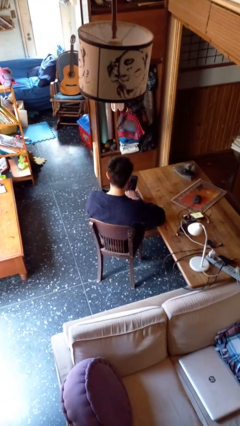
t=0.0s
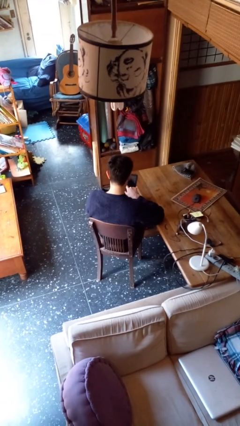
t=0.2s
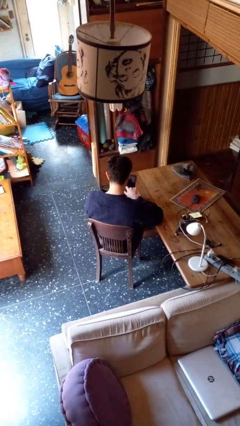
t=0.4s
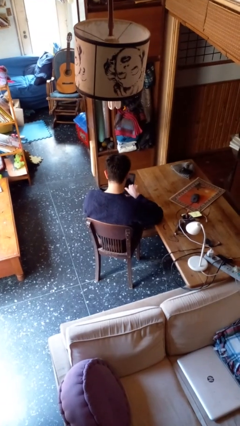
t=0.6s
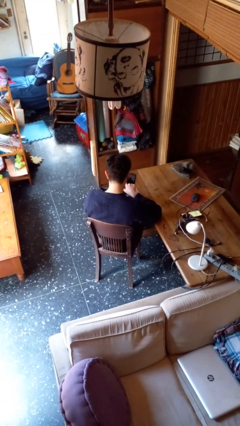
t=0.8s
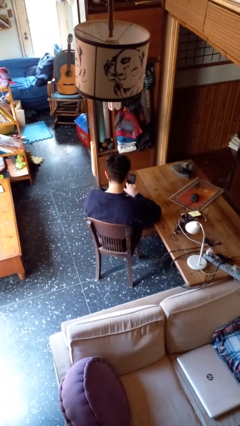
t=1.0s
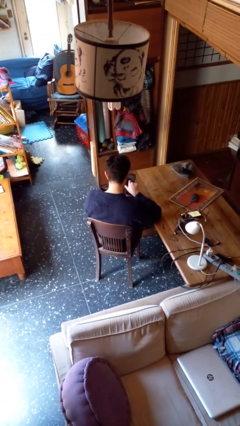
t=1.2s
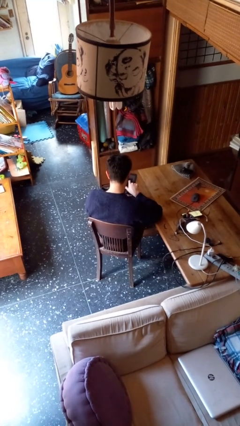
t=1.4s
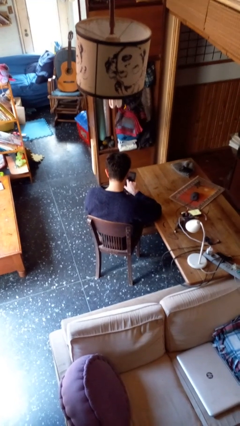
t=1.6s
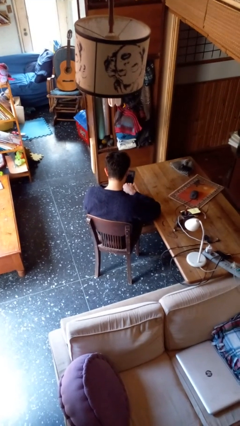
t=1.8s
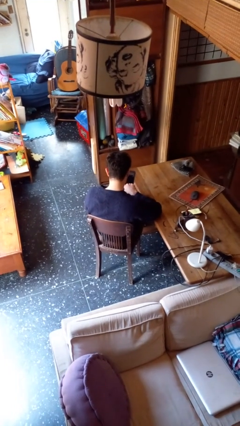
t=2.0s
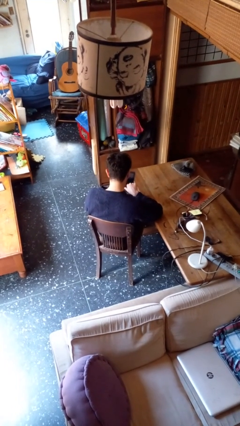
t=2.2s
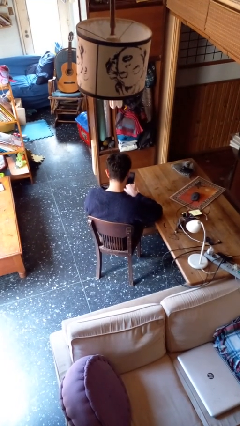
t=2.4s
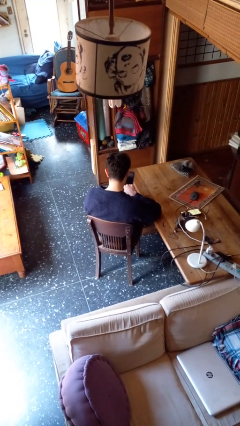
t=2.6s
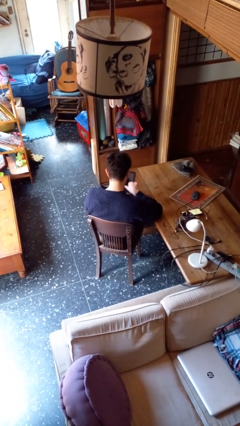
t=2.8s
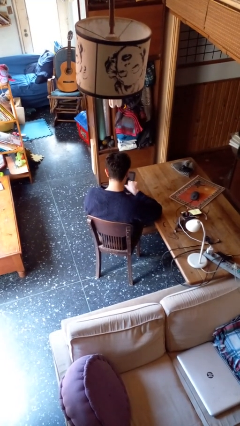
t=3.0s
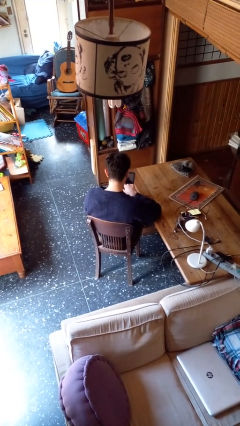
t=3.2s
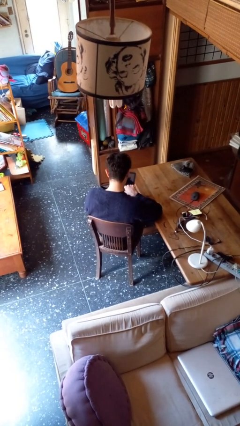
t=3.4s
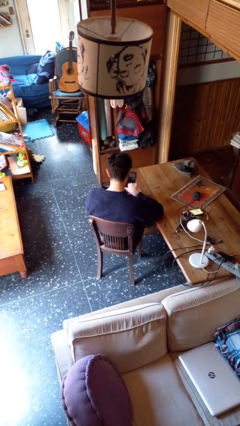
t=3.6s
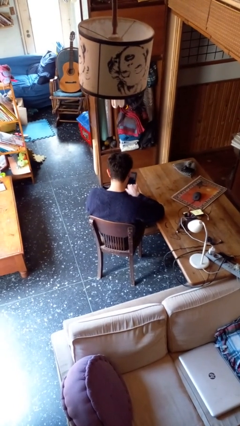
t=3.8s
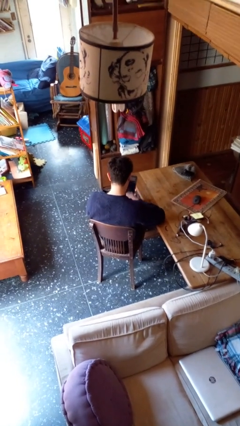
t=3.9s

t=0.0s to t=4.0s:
person interacts with tablet

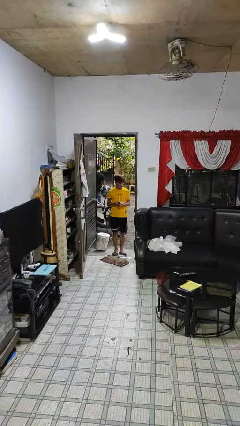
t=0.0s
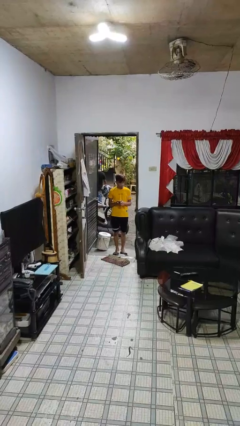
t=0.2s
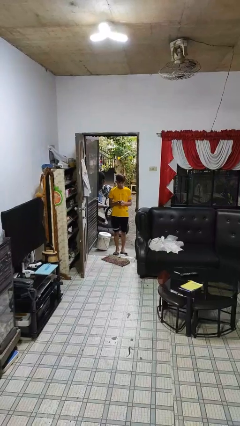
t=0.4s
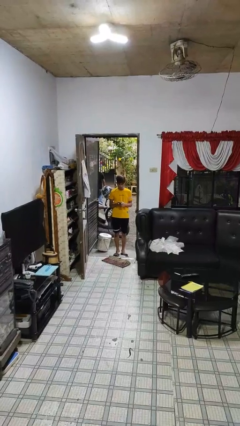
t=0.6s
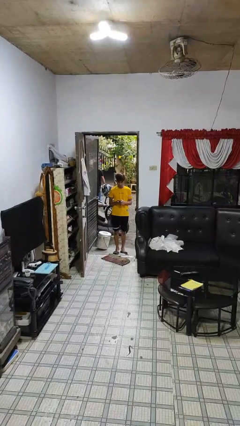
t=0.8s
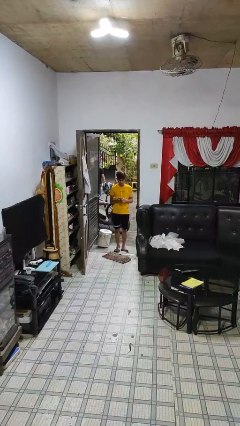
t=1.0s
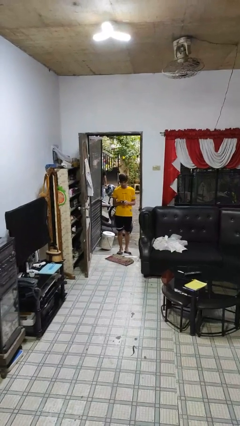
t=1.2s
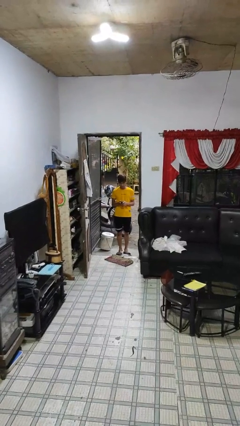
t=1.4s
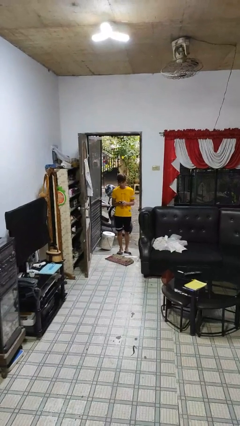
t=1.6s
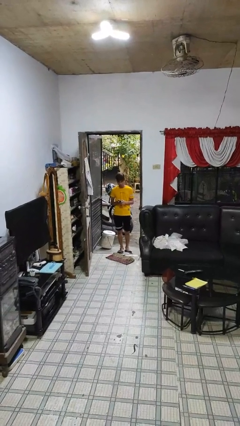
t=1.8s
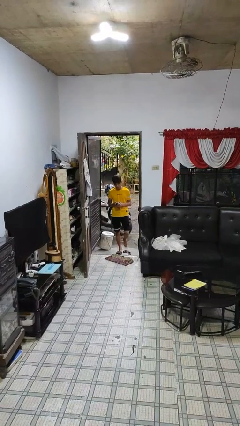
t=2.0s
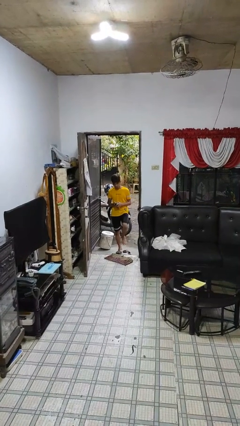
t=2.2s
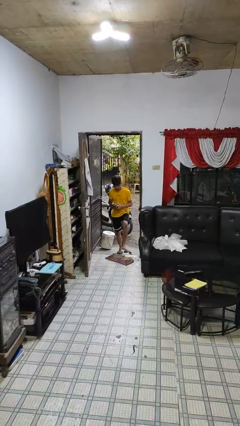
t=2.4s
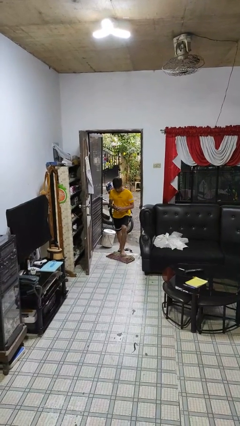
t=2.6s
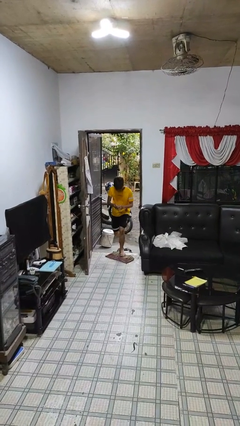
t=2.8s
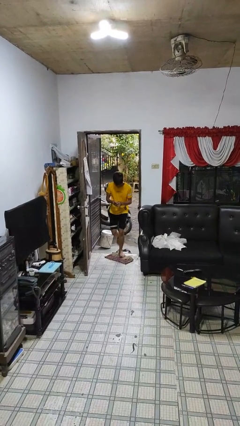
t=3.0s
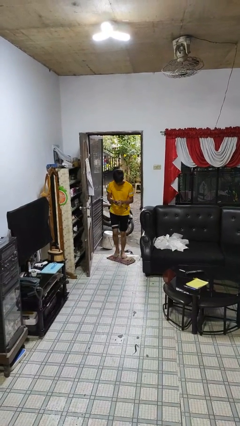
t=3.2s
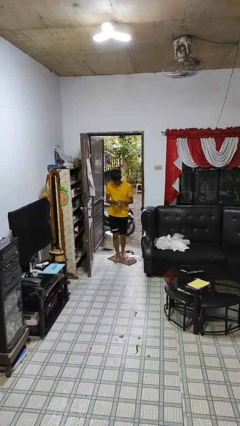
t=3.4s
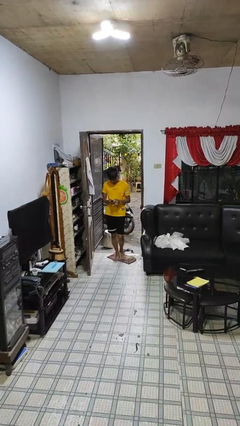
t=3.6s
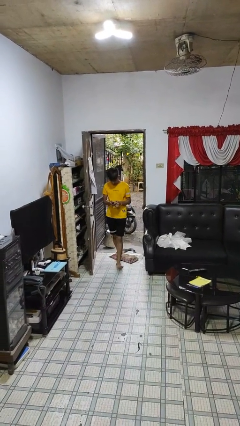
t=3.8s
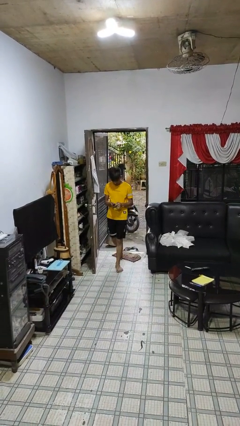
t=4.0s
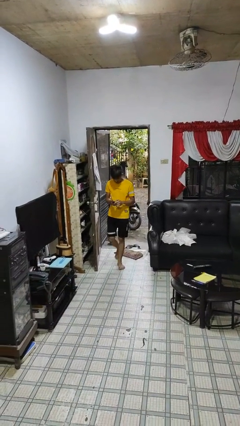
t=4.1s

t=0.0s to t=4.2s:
person enters scene through structure

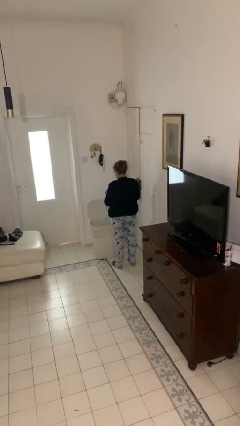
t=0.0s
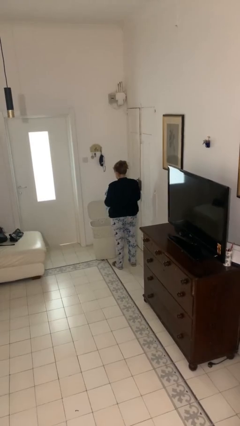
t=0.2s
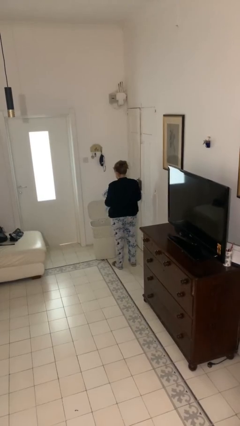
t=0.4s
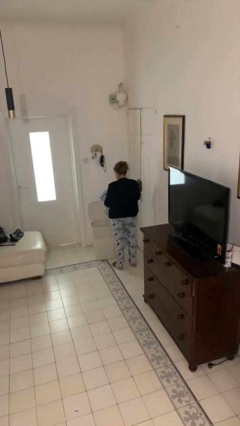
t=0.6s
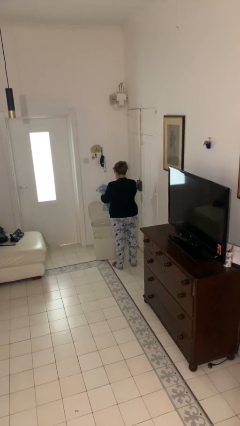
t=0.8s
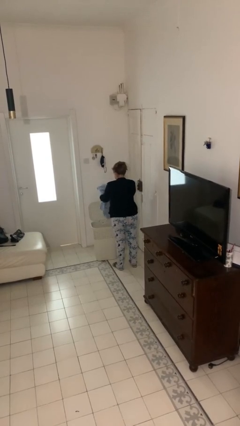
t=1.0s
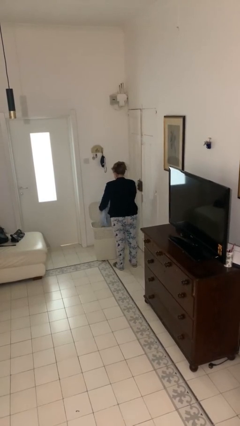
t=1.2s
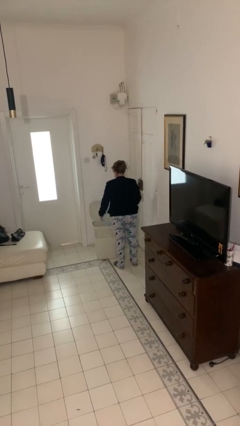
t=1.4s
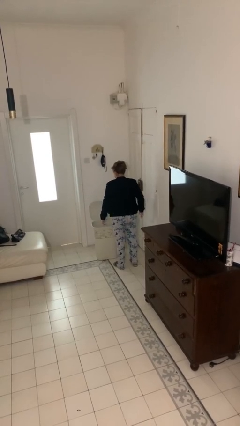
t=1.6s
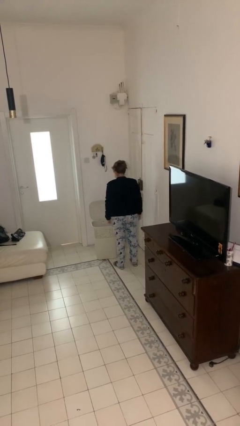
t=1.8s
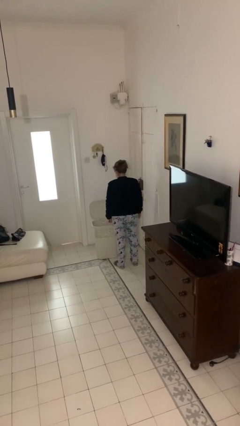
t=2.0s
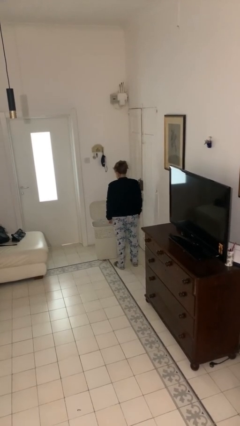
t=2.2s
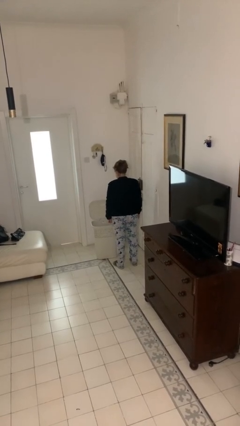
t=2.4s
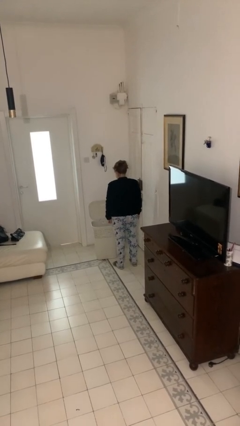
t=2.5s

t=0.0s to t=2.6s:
person puts object into basket

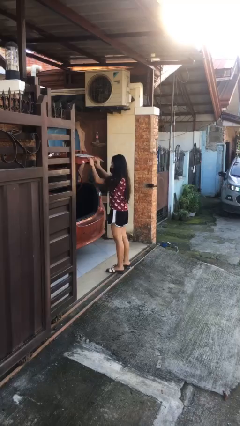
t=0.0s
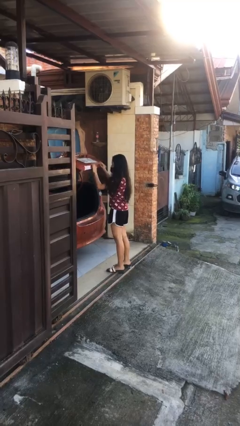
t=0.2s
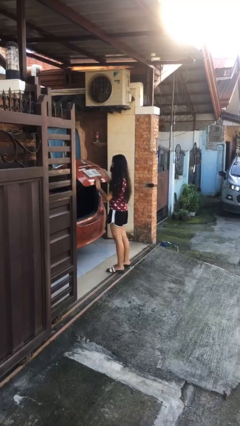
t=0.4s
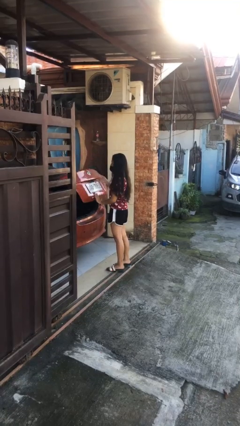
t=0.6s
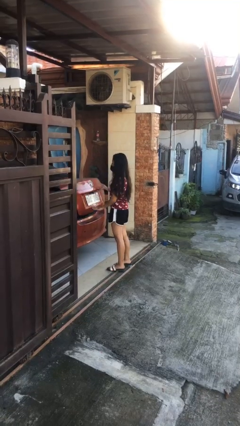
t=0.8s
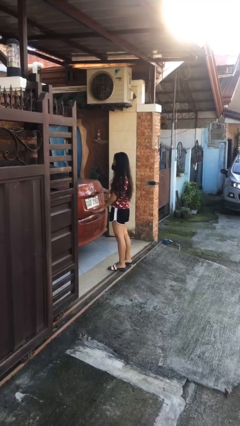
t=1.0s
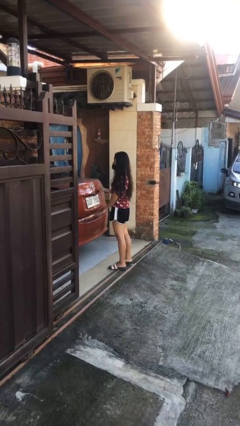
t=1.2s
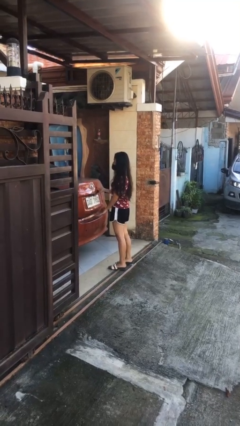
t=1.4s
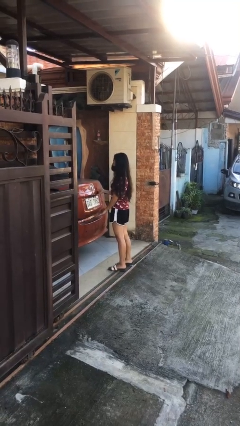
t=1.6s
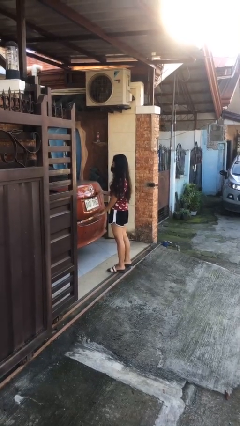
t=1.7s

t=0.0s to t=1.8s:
person closes car trunk

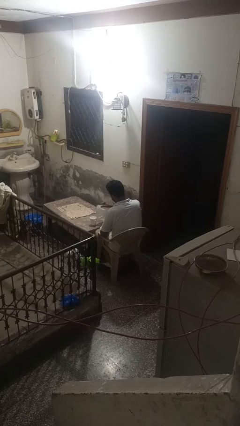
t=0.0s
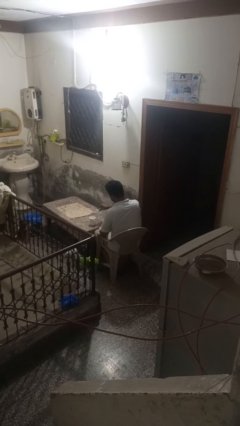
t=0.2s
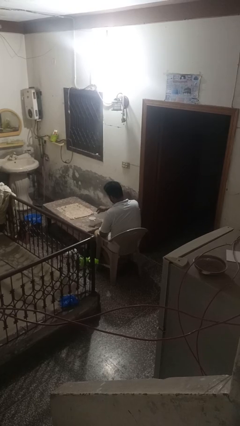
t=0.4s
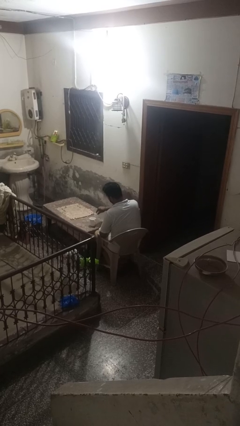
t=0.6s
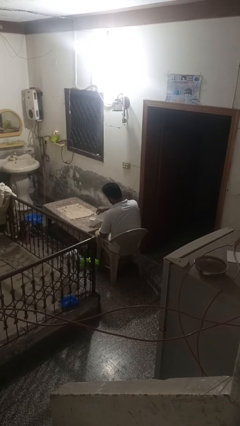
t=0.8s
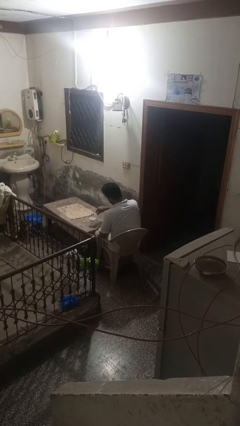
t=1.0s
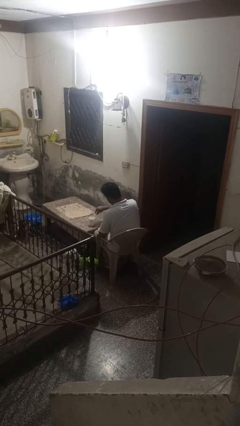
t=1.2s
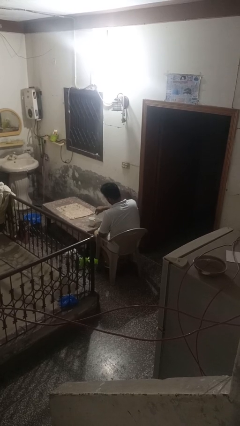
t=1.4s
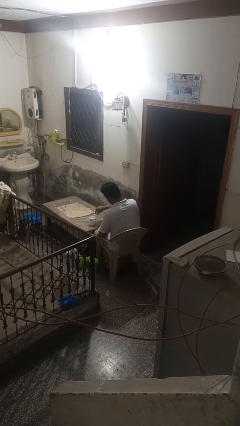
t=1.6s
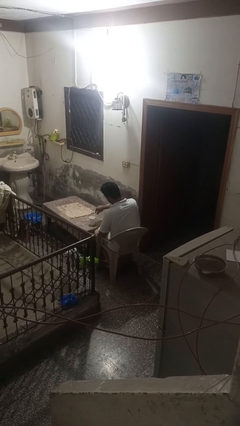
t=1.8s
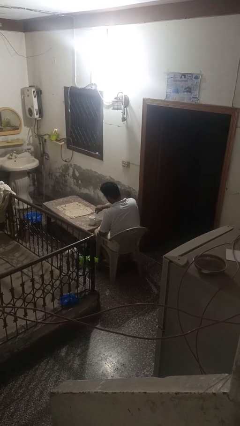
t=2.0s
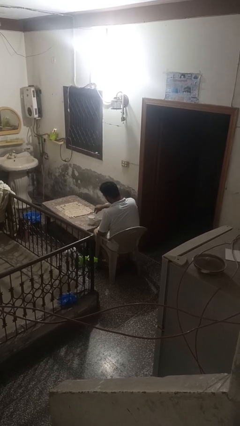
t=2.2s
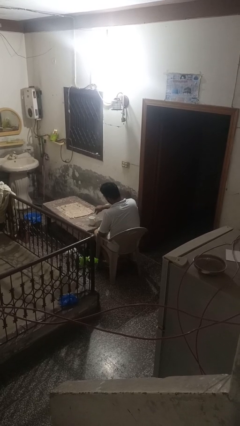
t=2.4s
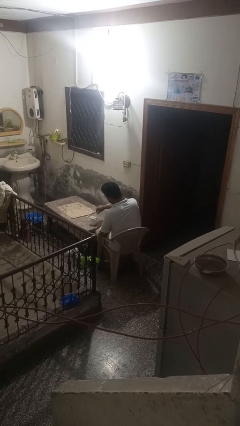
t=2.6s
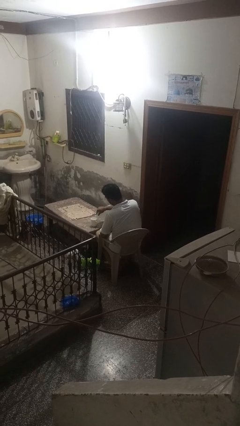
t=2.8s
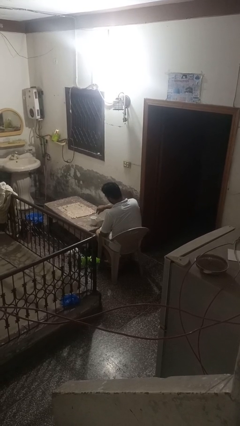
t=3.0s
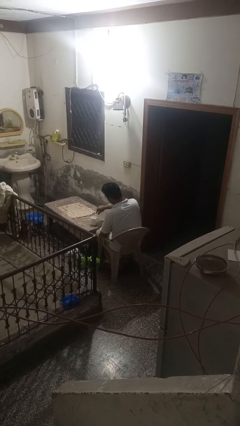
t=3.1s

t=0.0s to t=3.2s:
person pours liquid into cup

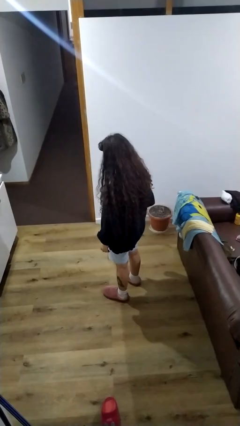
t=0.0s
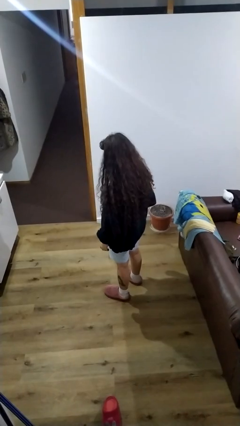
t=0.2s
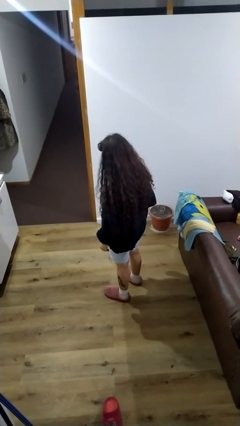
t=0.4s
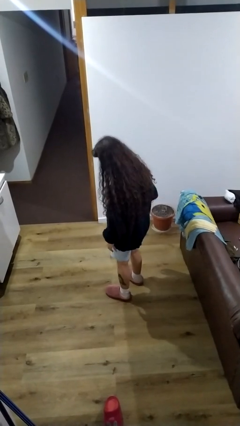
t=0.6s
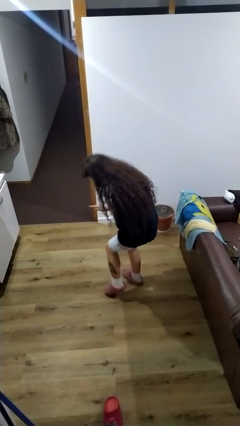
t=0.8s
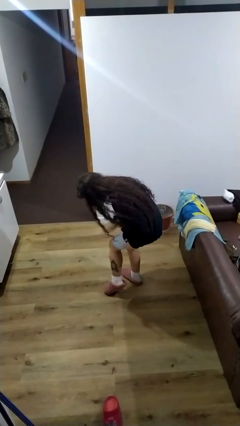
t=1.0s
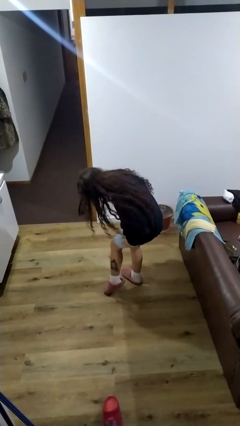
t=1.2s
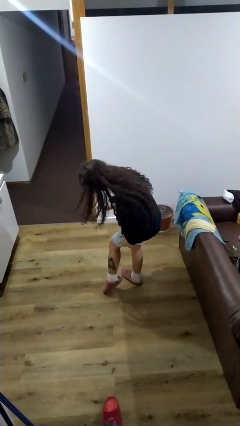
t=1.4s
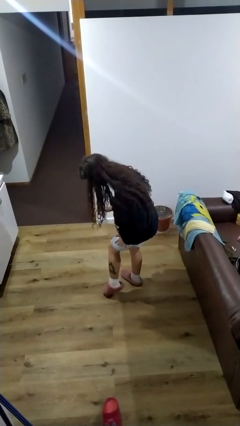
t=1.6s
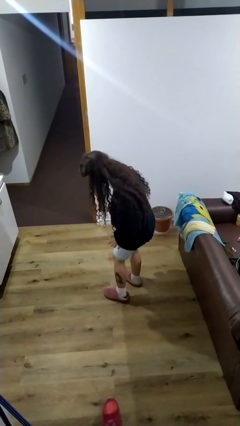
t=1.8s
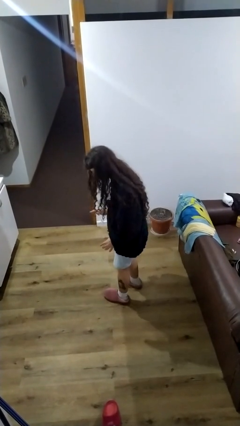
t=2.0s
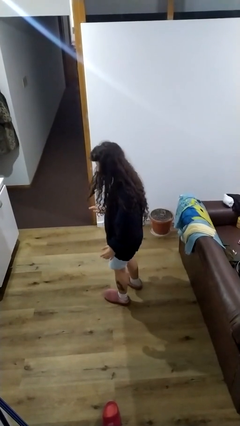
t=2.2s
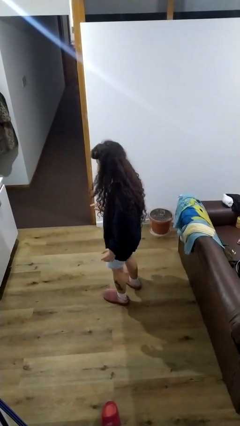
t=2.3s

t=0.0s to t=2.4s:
person swats bug
